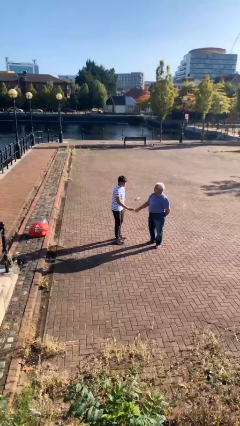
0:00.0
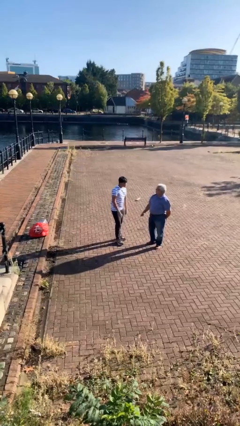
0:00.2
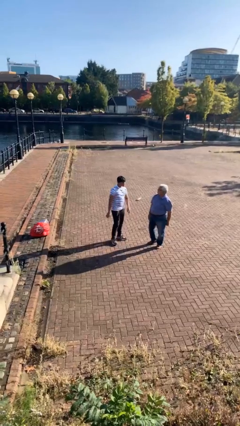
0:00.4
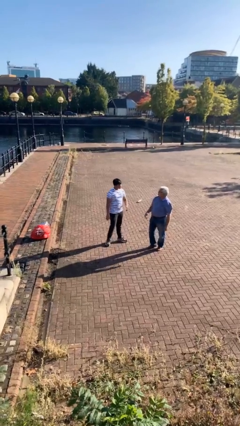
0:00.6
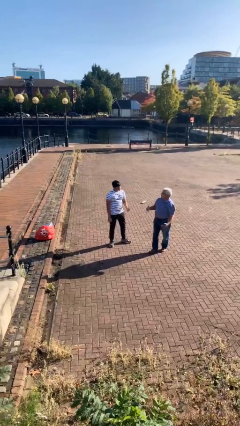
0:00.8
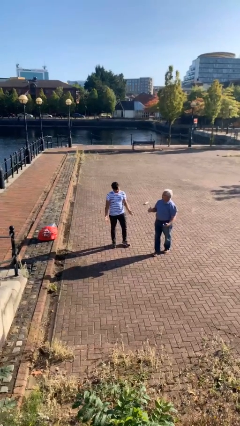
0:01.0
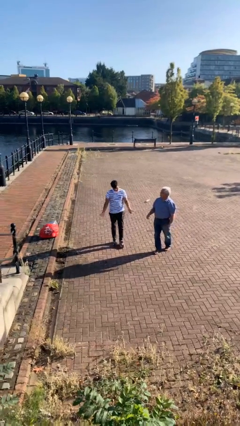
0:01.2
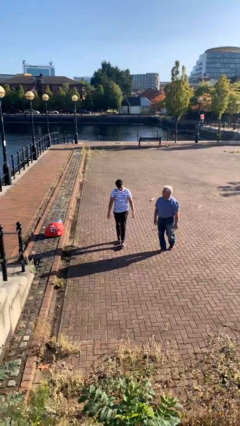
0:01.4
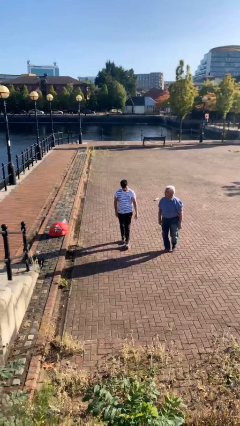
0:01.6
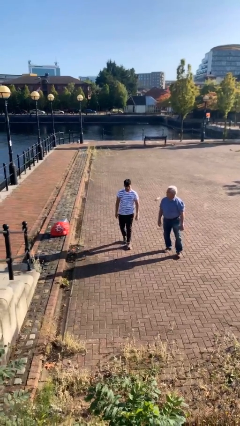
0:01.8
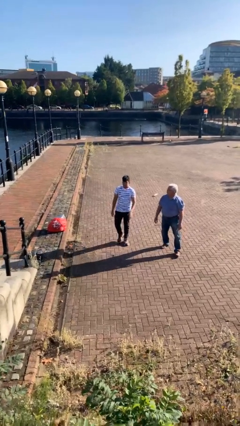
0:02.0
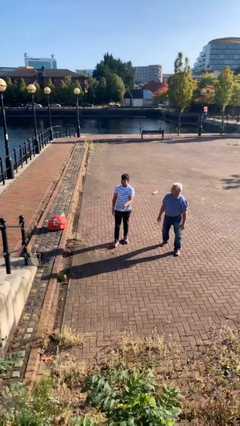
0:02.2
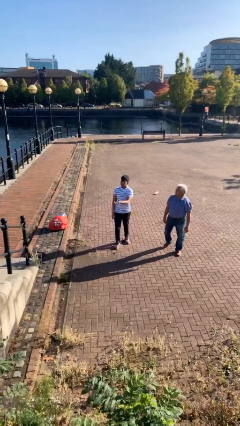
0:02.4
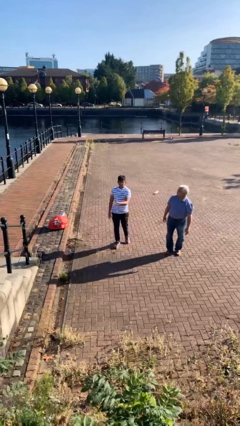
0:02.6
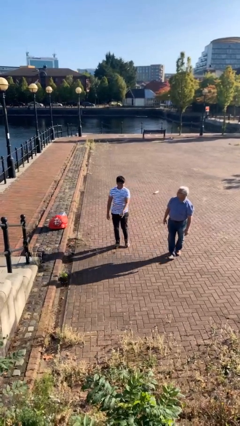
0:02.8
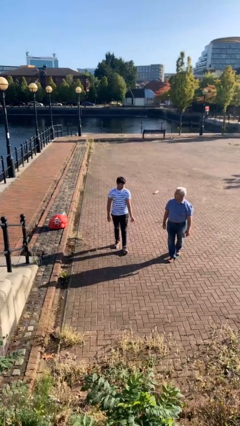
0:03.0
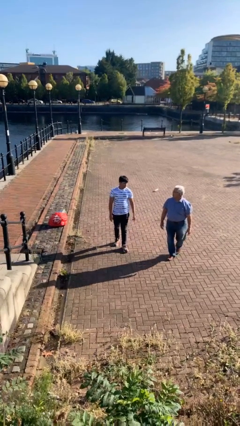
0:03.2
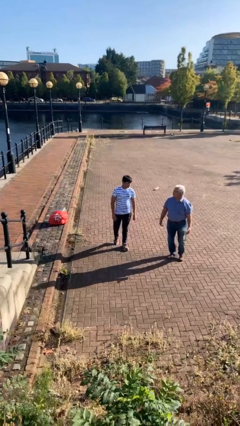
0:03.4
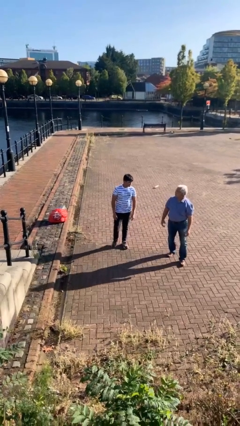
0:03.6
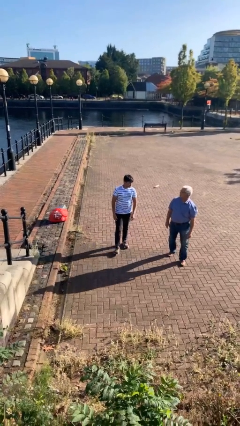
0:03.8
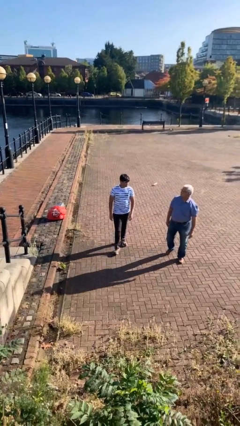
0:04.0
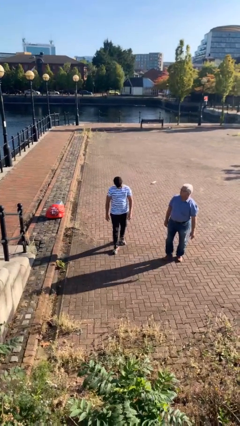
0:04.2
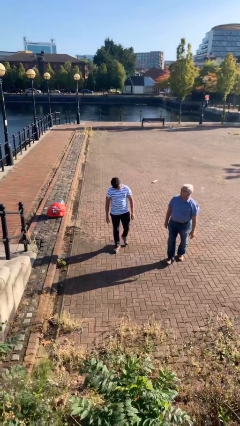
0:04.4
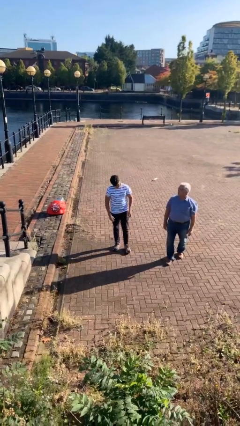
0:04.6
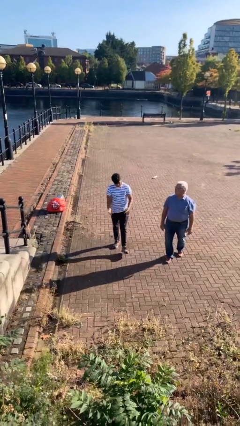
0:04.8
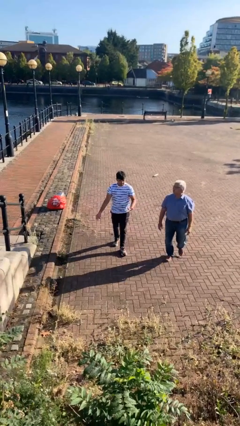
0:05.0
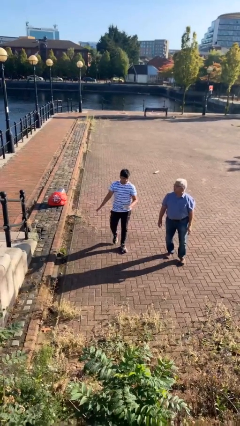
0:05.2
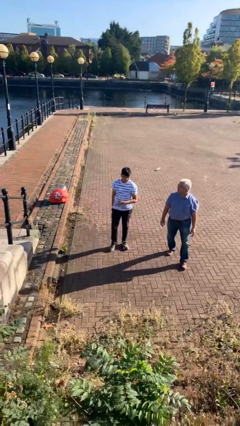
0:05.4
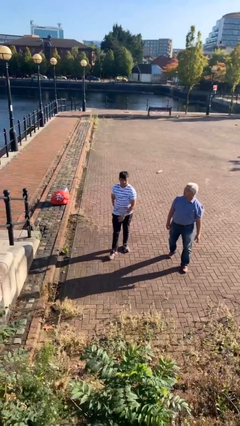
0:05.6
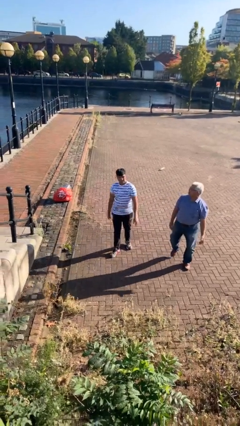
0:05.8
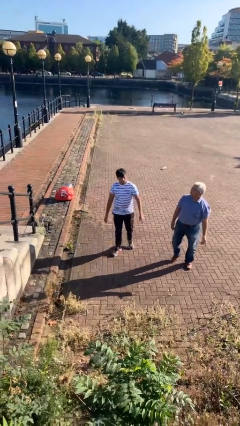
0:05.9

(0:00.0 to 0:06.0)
person talks to person

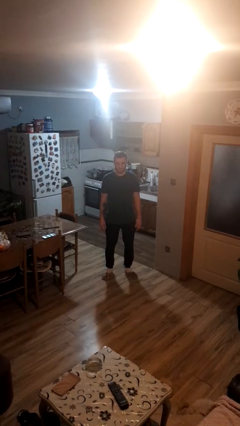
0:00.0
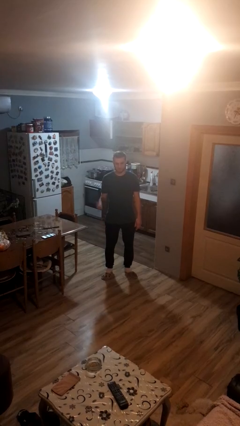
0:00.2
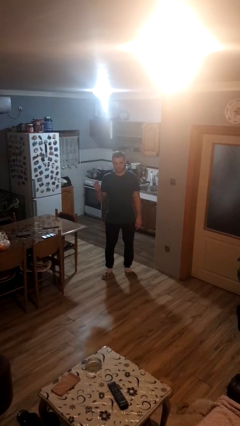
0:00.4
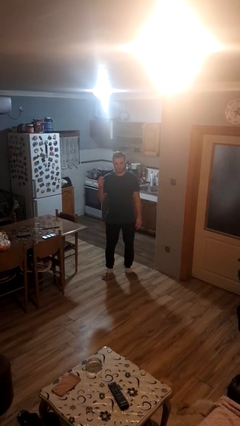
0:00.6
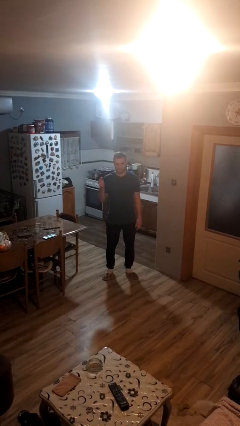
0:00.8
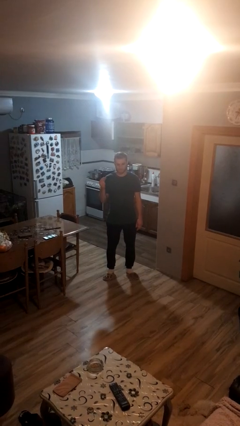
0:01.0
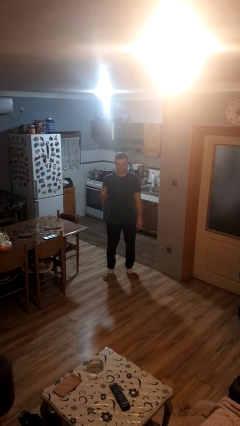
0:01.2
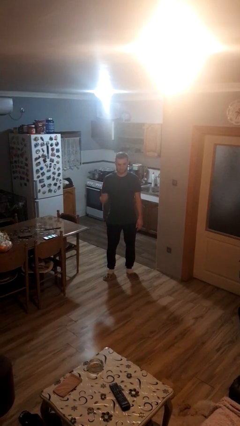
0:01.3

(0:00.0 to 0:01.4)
person snaps fingers

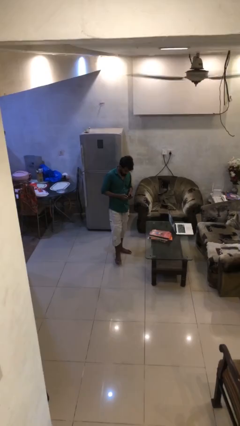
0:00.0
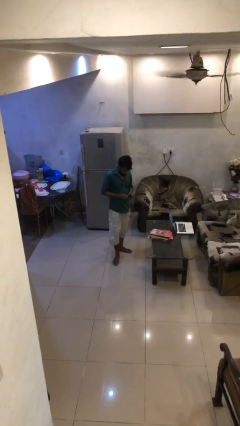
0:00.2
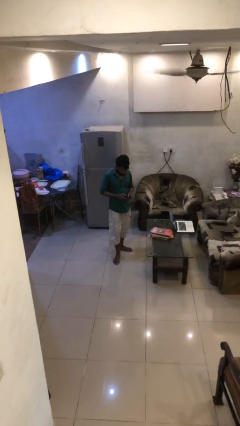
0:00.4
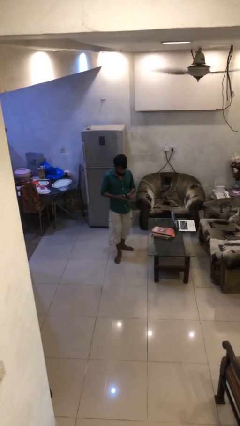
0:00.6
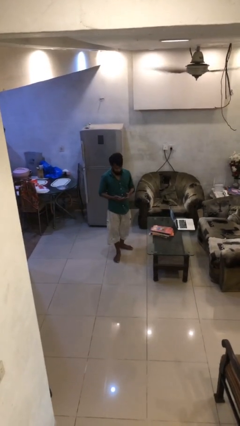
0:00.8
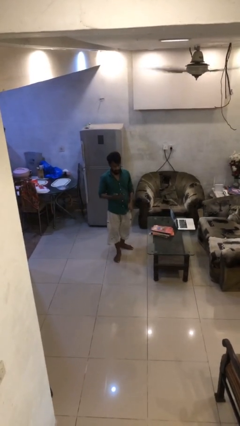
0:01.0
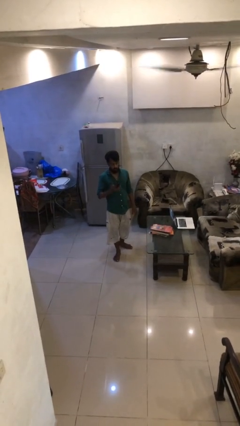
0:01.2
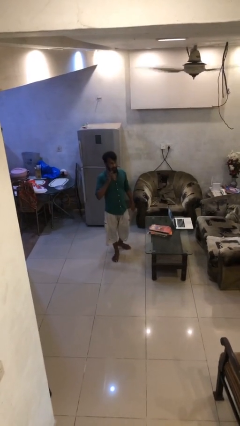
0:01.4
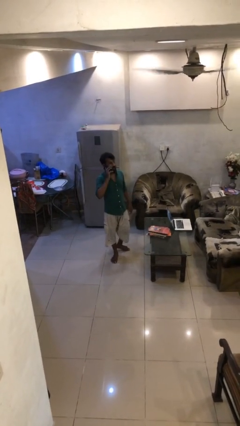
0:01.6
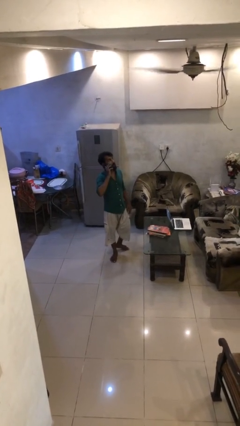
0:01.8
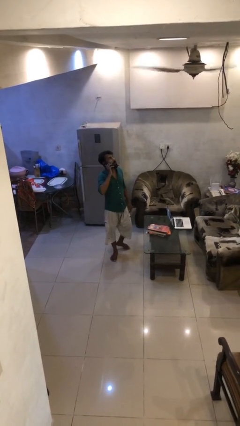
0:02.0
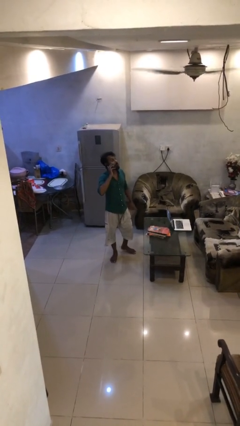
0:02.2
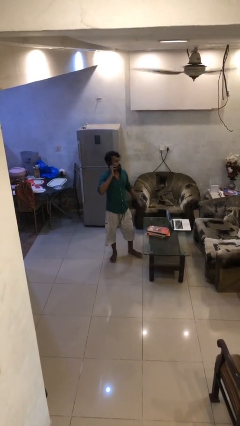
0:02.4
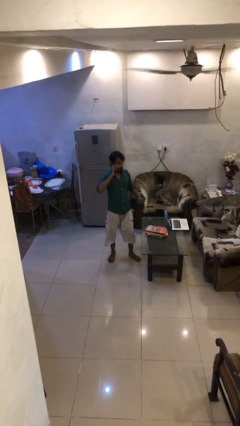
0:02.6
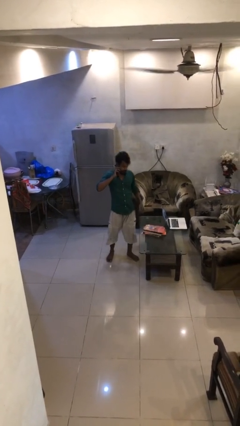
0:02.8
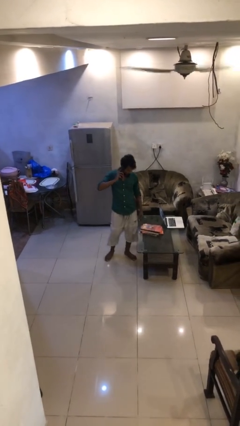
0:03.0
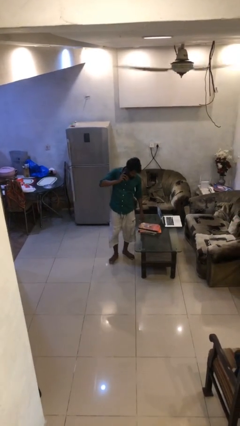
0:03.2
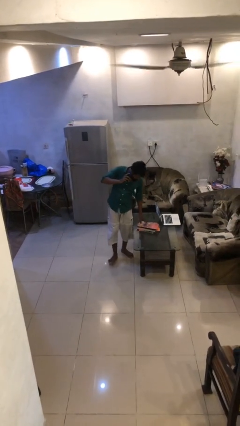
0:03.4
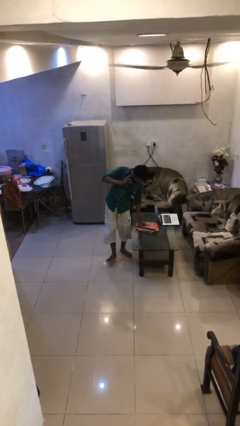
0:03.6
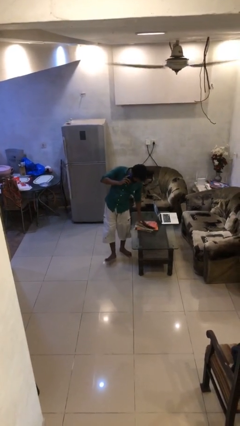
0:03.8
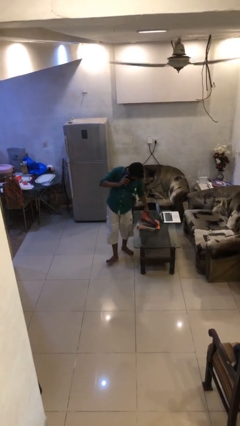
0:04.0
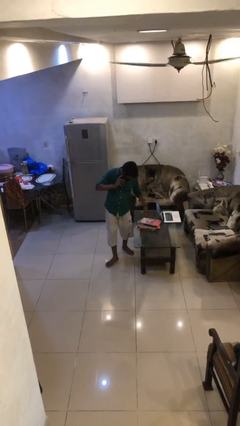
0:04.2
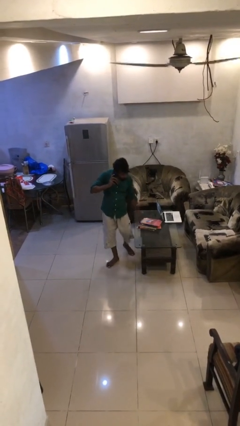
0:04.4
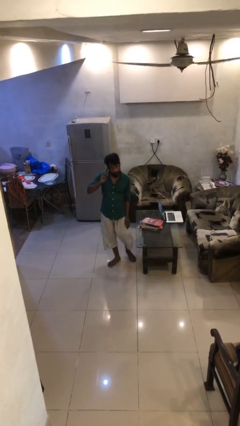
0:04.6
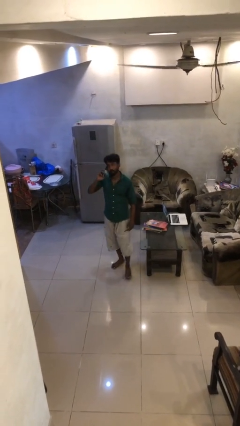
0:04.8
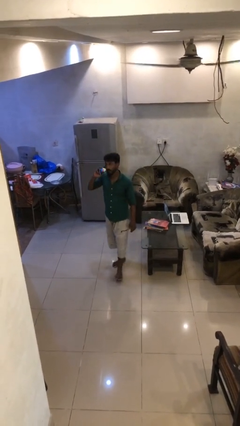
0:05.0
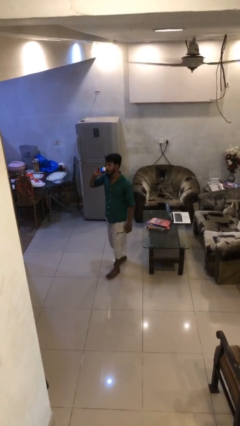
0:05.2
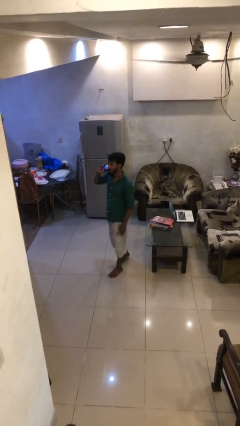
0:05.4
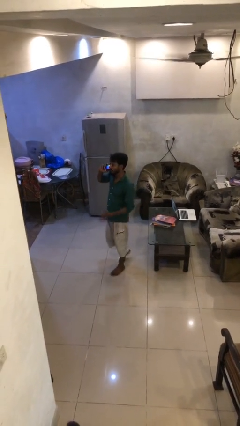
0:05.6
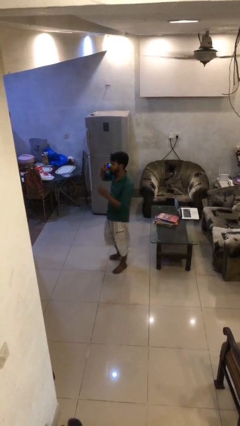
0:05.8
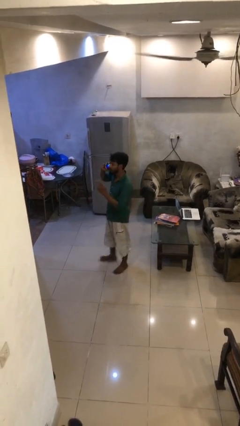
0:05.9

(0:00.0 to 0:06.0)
person talks on phone

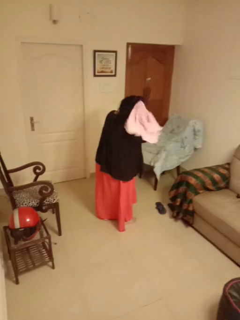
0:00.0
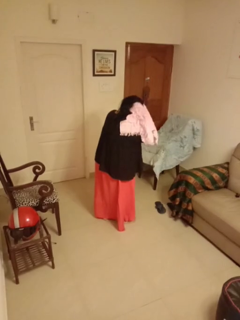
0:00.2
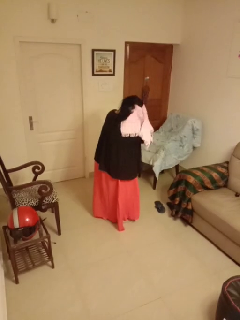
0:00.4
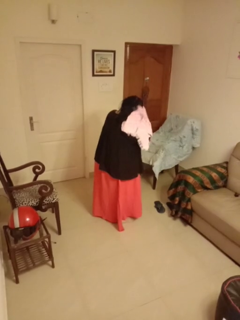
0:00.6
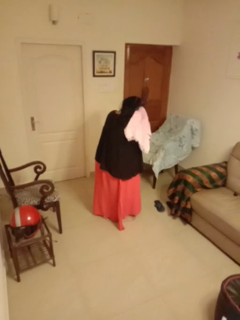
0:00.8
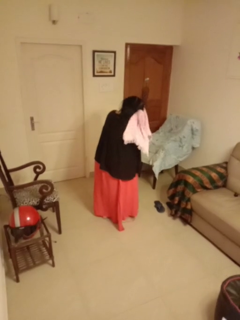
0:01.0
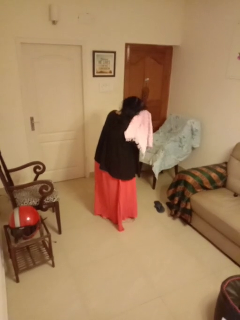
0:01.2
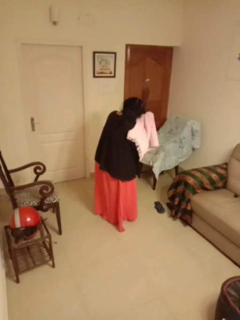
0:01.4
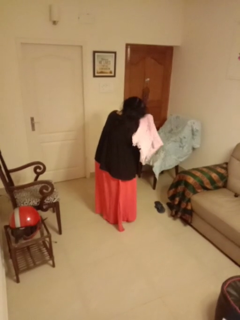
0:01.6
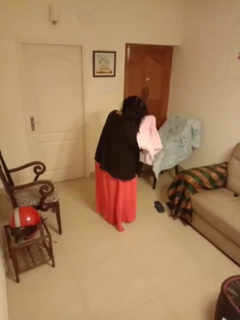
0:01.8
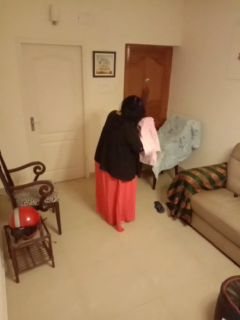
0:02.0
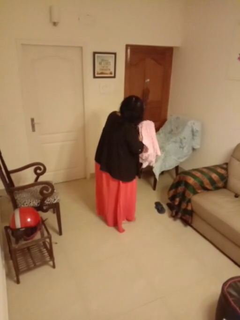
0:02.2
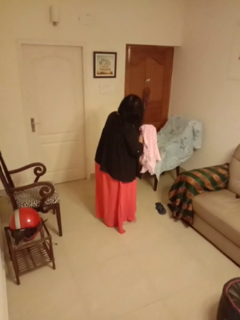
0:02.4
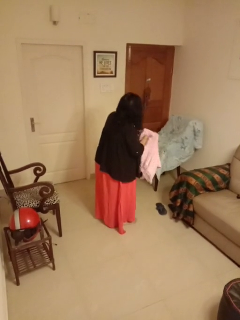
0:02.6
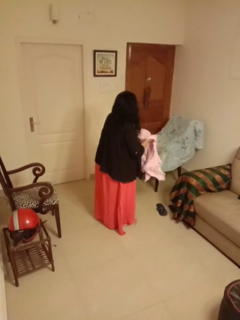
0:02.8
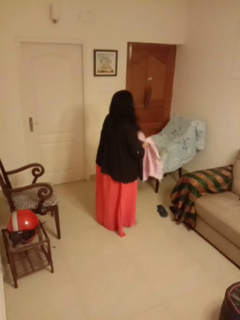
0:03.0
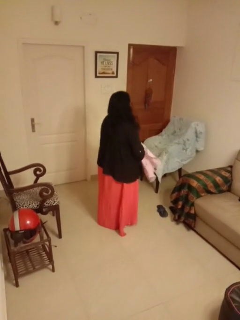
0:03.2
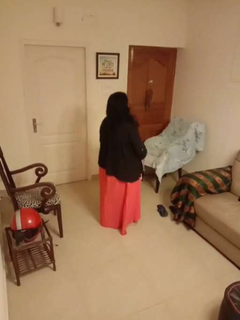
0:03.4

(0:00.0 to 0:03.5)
person dries hair with towel

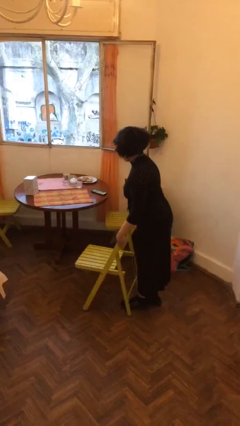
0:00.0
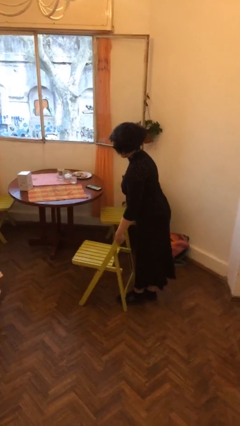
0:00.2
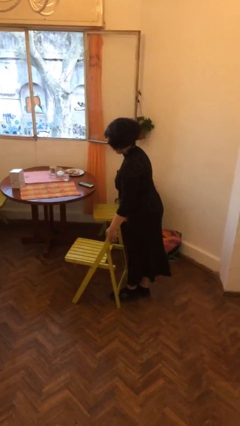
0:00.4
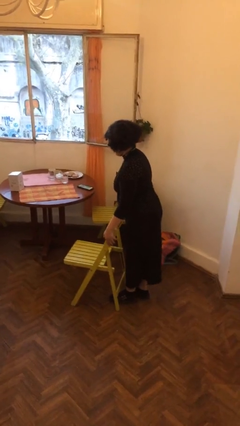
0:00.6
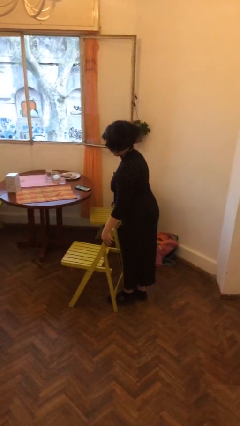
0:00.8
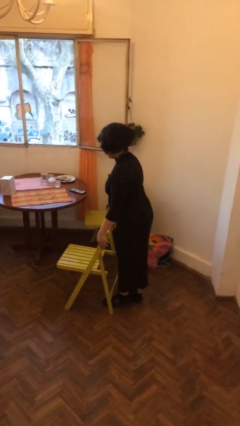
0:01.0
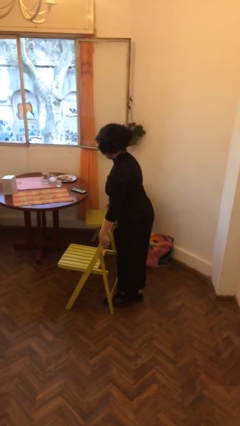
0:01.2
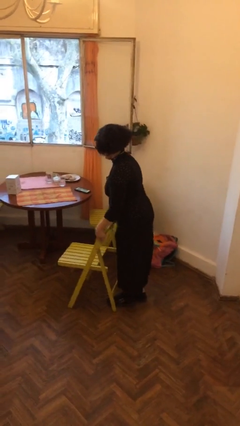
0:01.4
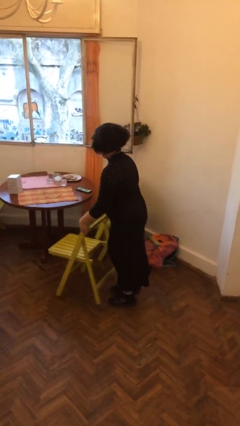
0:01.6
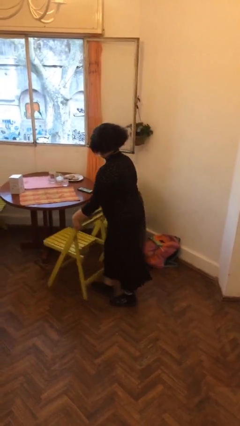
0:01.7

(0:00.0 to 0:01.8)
person pushes in chair
